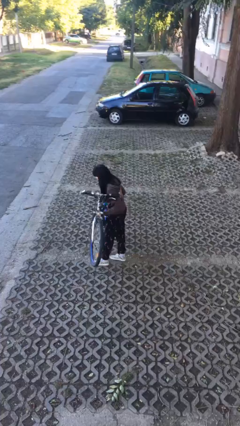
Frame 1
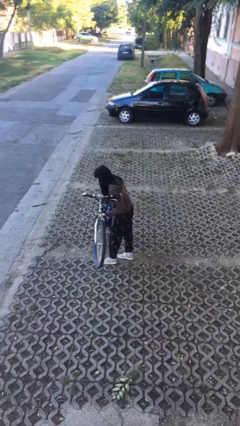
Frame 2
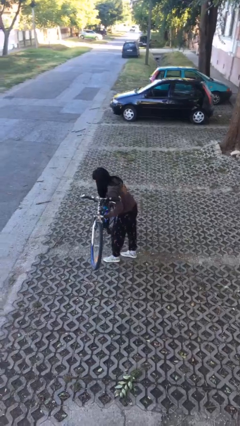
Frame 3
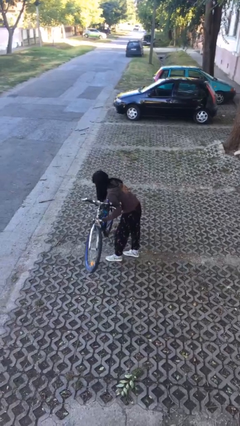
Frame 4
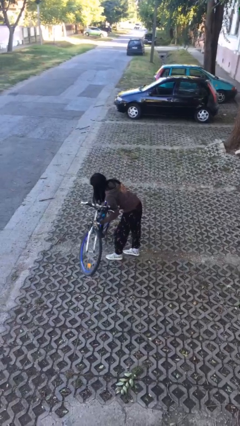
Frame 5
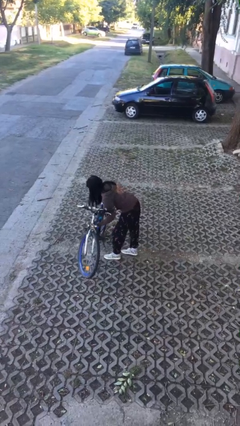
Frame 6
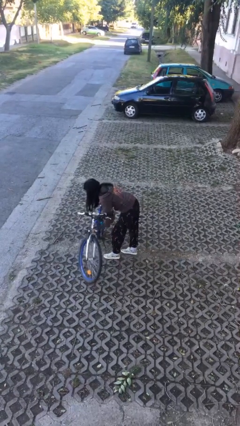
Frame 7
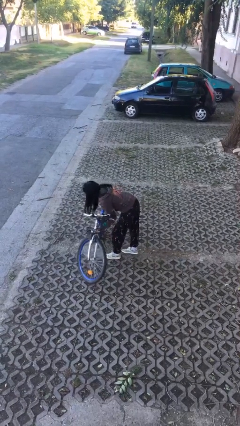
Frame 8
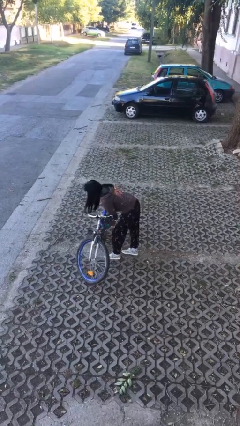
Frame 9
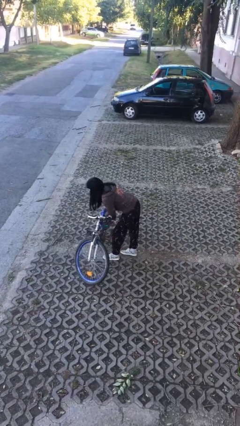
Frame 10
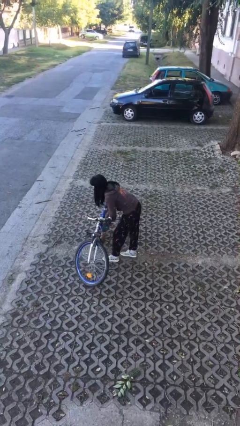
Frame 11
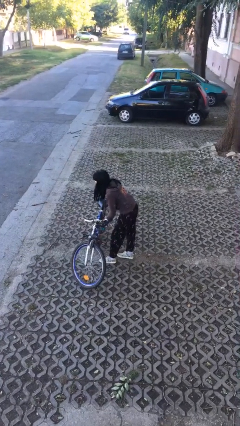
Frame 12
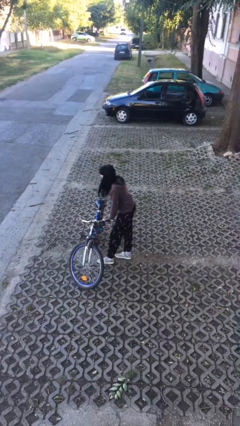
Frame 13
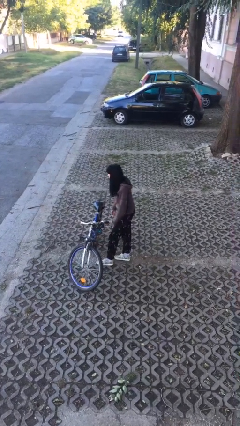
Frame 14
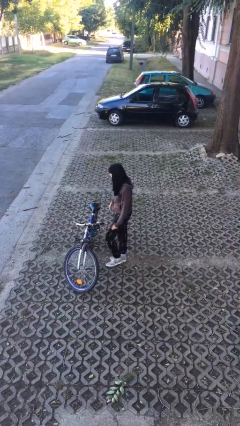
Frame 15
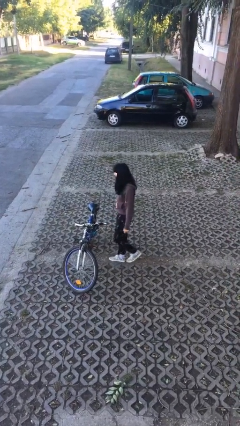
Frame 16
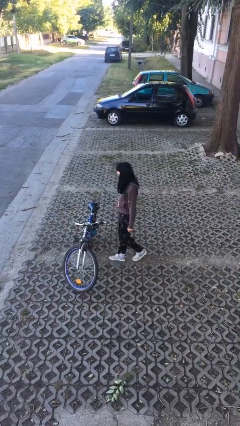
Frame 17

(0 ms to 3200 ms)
person puts down object on floor

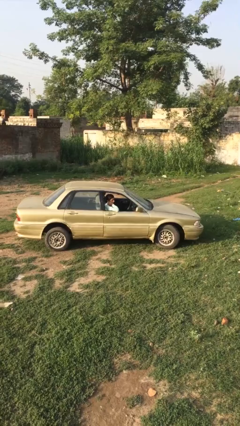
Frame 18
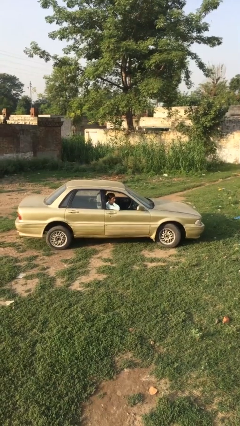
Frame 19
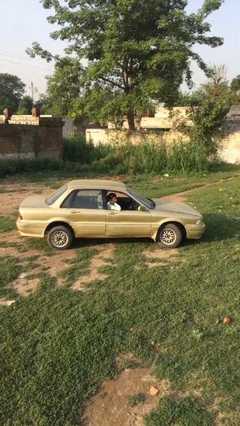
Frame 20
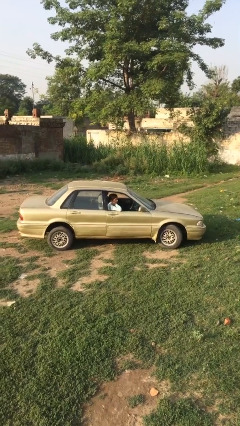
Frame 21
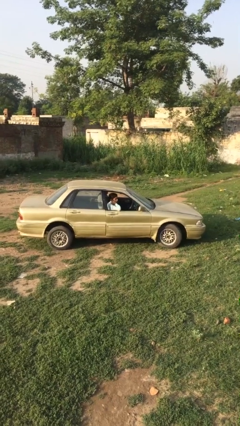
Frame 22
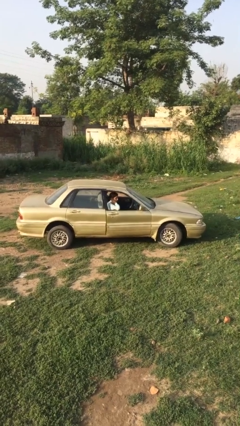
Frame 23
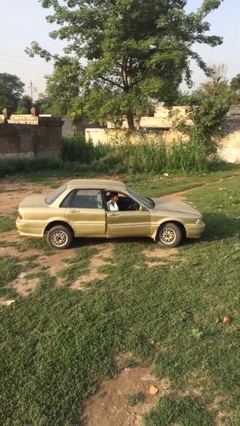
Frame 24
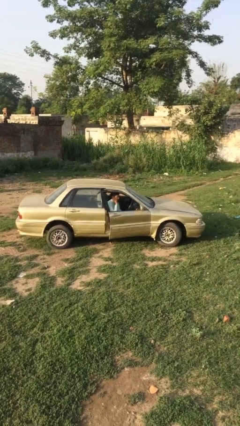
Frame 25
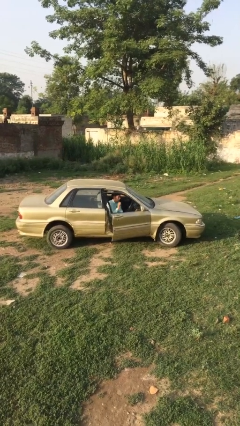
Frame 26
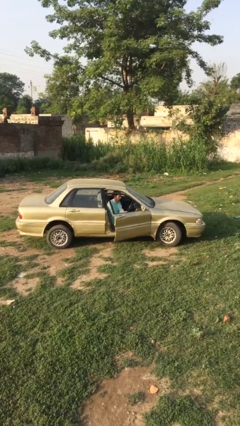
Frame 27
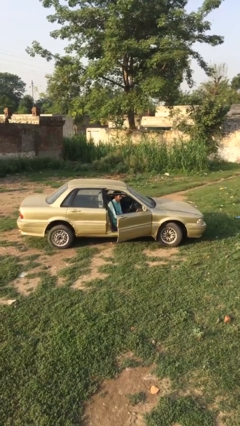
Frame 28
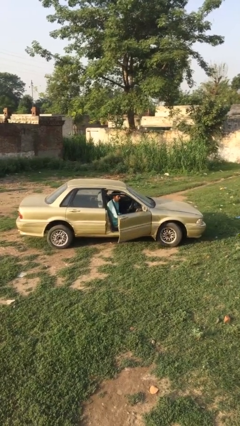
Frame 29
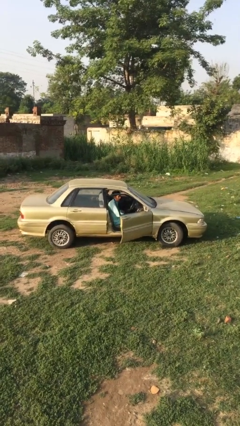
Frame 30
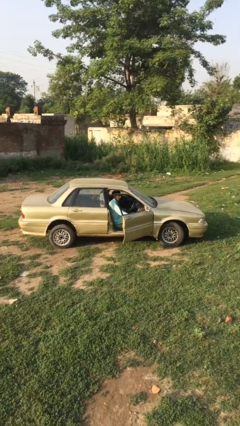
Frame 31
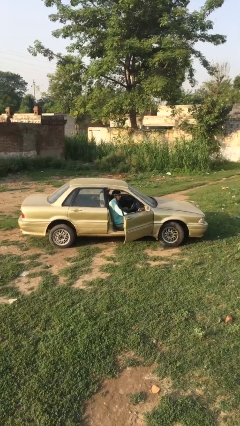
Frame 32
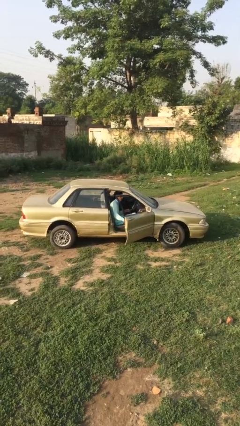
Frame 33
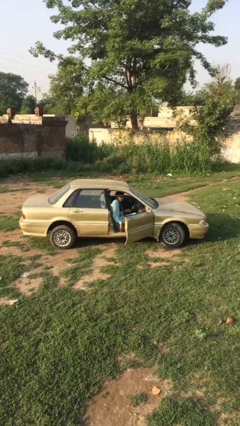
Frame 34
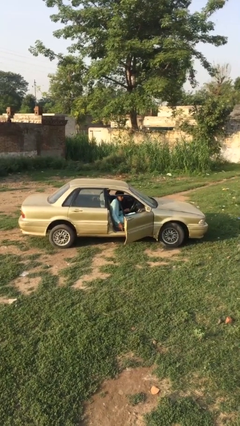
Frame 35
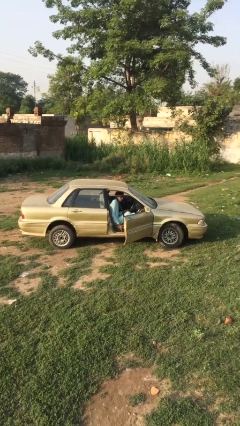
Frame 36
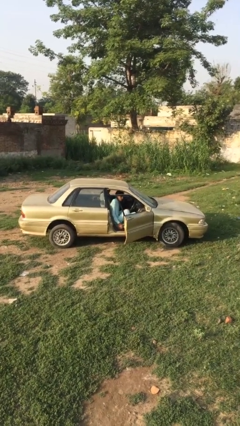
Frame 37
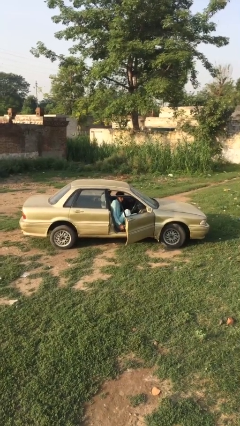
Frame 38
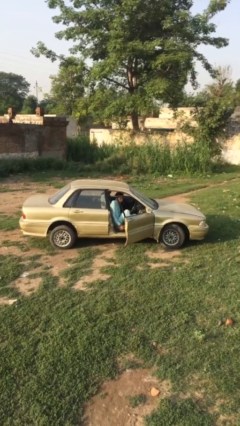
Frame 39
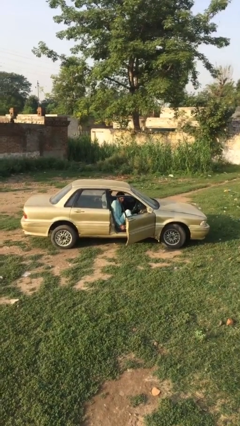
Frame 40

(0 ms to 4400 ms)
person opens car door

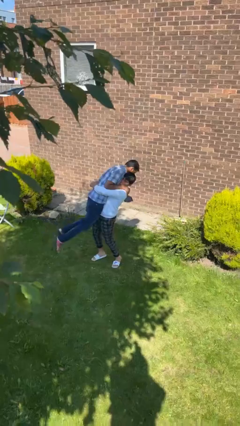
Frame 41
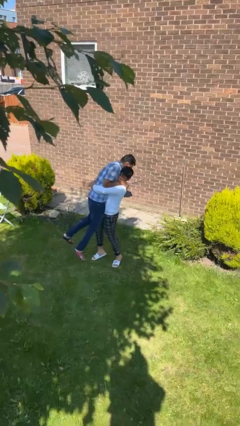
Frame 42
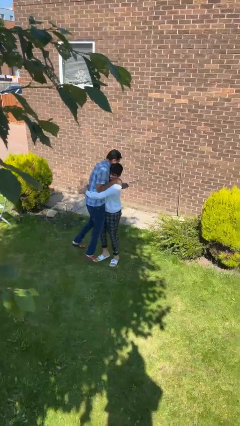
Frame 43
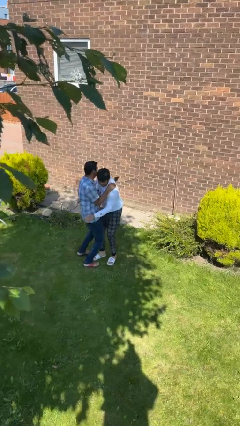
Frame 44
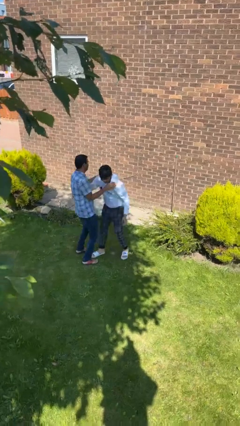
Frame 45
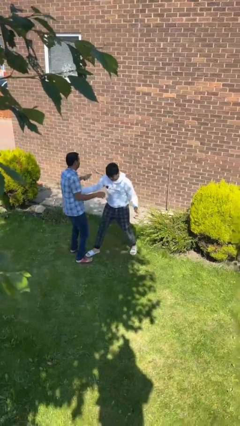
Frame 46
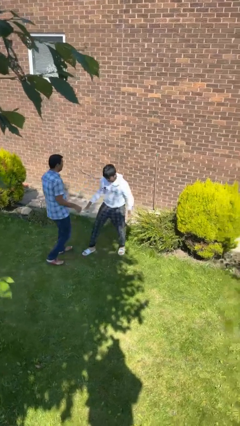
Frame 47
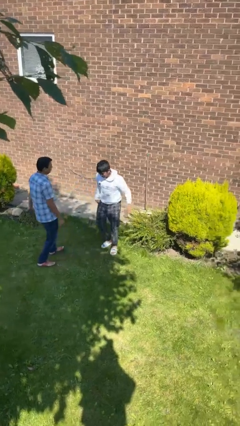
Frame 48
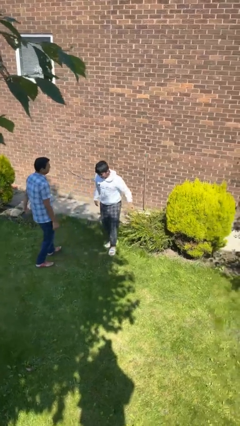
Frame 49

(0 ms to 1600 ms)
person puts down person

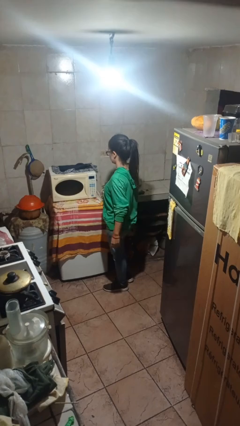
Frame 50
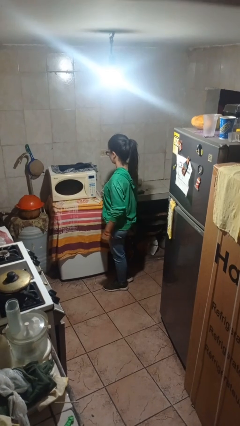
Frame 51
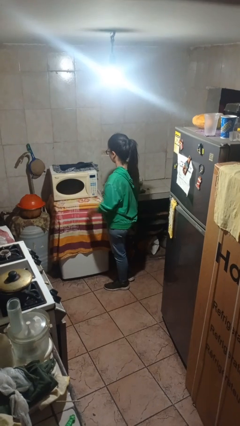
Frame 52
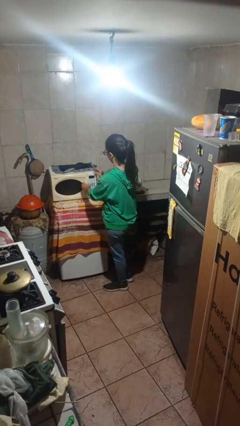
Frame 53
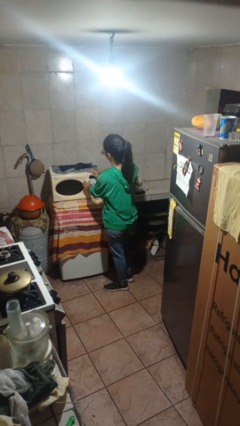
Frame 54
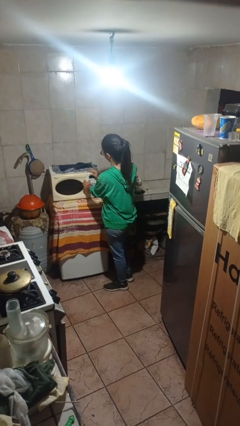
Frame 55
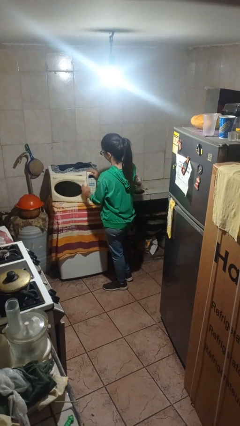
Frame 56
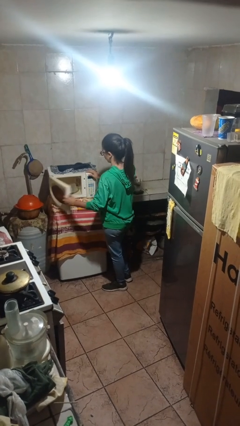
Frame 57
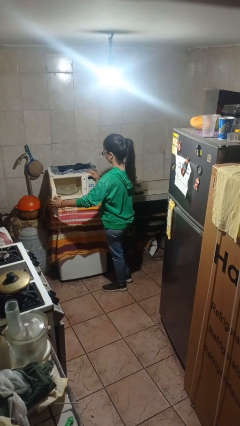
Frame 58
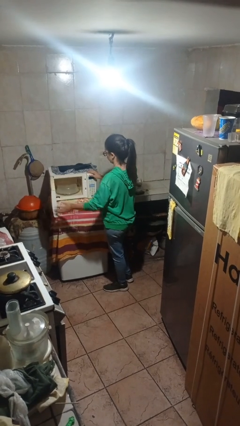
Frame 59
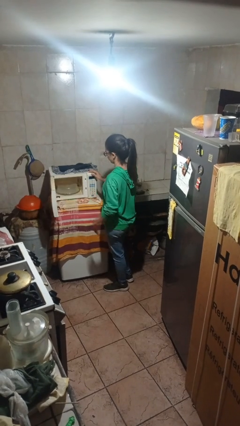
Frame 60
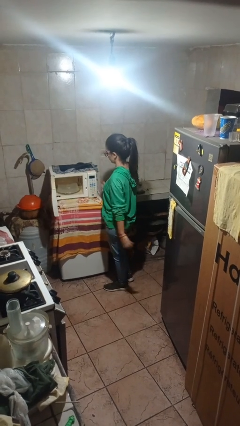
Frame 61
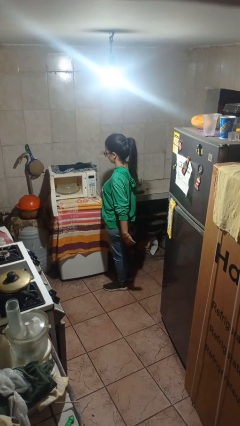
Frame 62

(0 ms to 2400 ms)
person opens microwave

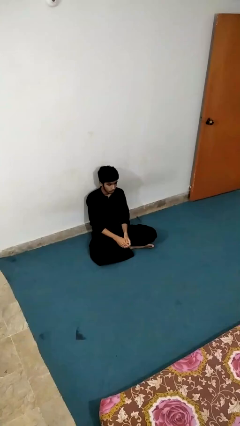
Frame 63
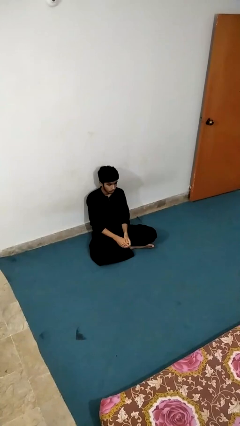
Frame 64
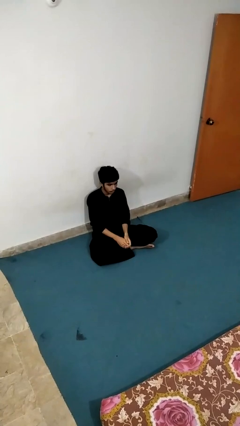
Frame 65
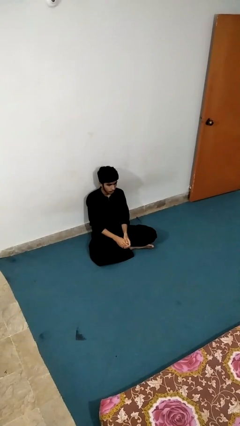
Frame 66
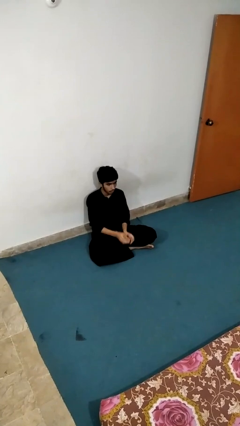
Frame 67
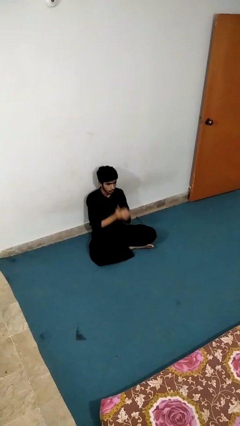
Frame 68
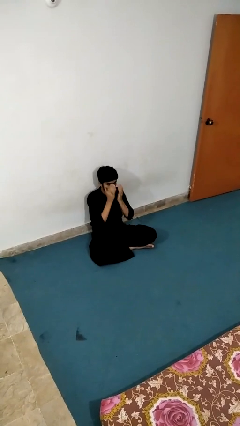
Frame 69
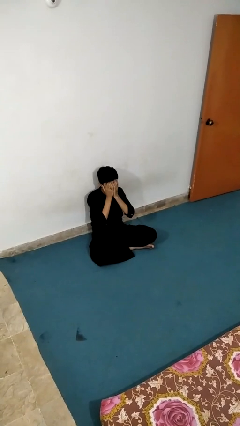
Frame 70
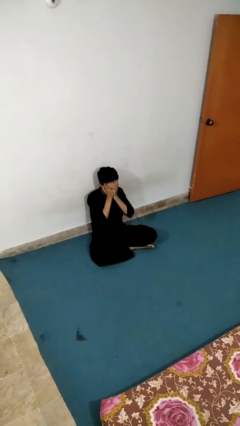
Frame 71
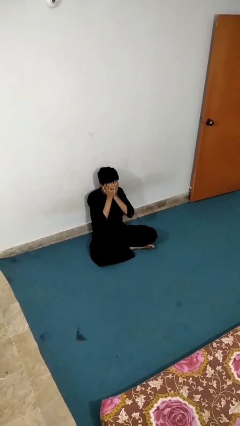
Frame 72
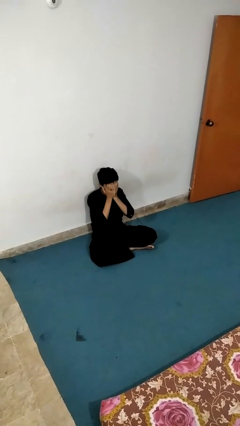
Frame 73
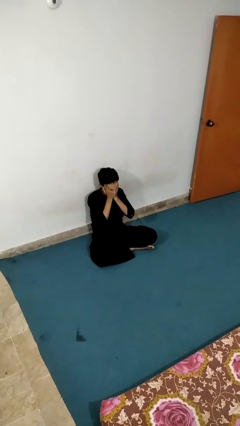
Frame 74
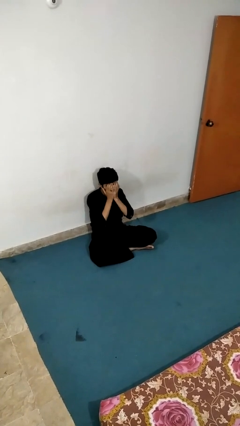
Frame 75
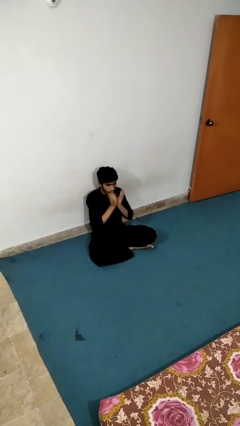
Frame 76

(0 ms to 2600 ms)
person covers face with hands

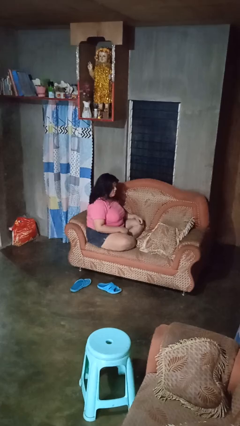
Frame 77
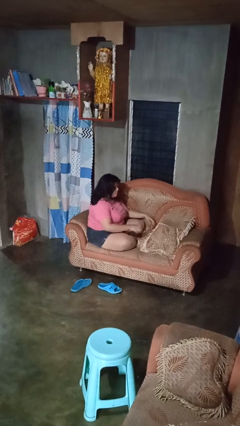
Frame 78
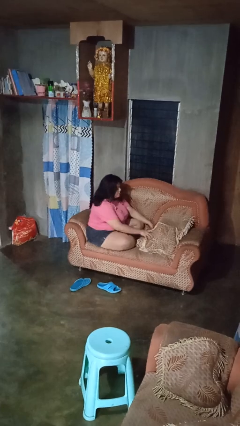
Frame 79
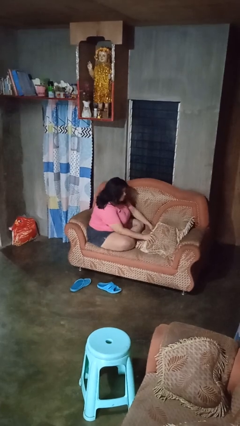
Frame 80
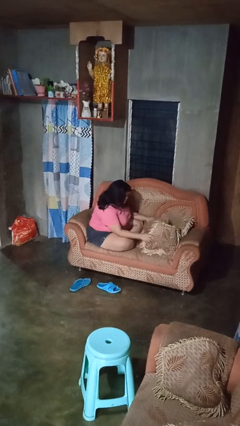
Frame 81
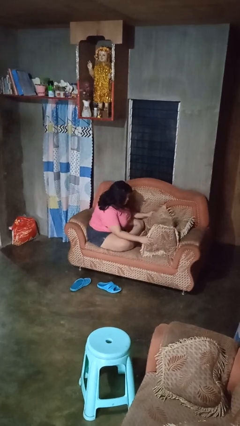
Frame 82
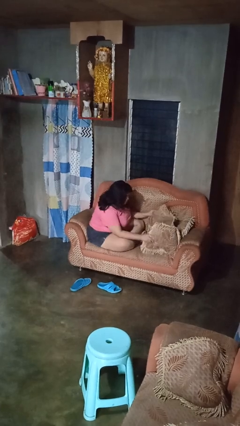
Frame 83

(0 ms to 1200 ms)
person searches in couch

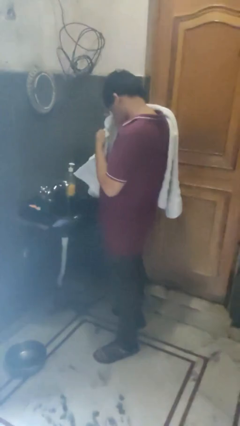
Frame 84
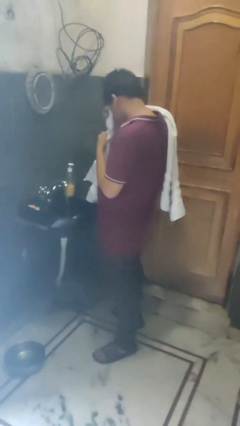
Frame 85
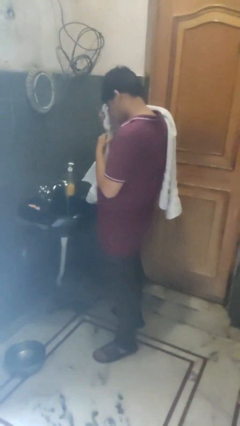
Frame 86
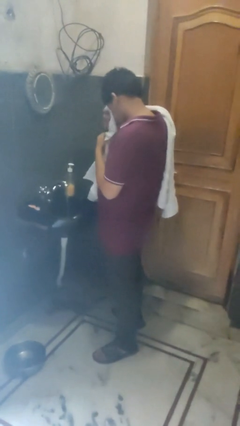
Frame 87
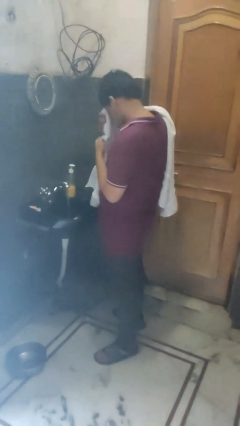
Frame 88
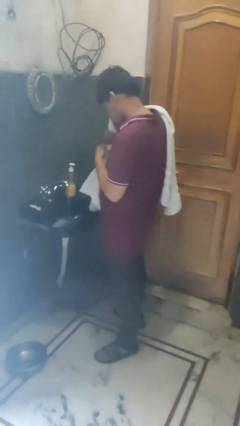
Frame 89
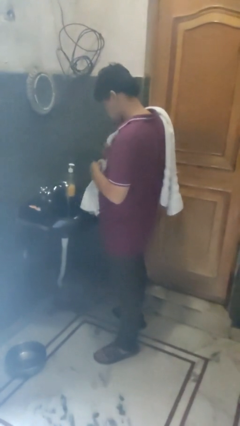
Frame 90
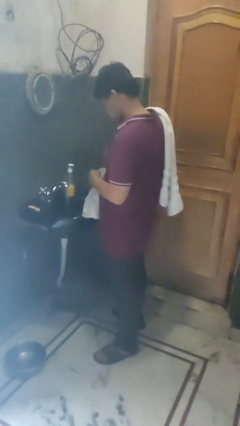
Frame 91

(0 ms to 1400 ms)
person dries face with towel
